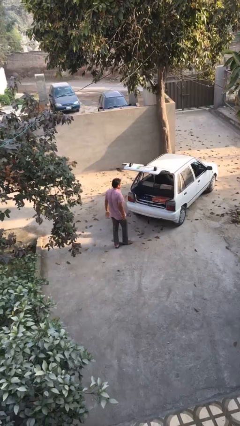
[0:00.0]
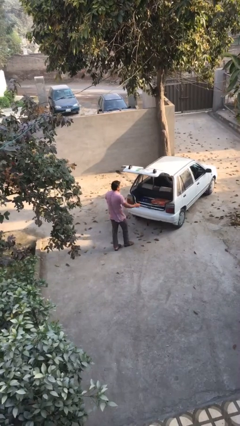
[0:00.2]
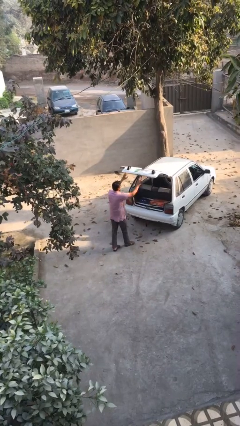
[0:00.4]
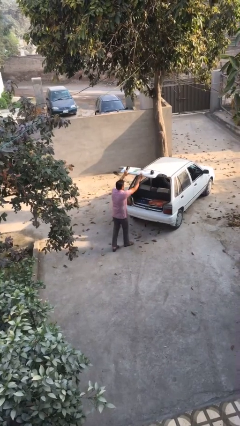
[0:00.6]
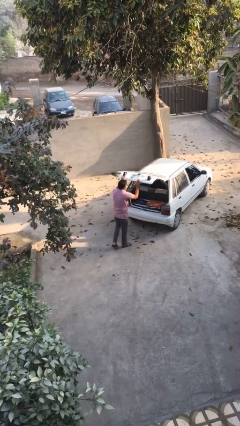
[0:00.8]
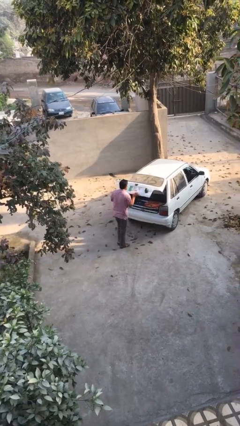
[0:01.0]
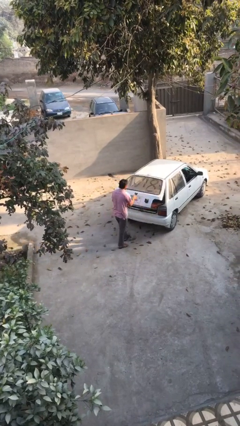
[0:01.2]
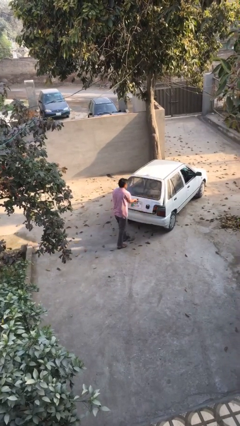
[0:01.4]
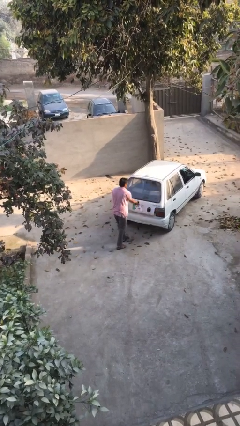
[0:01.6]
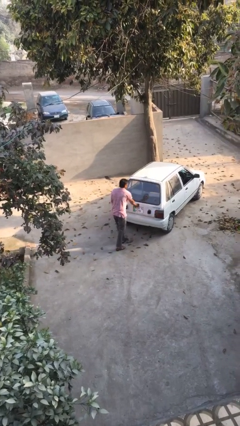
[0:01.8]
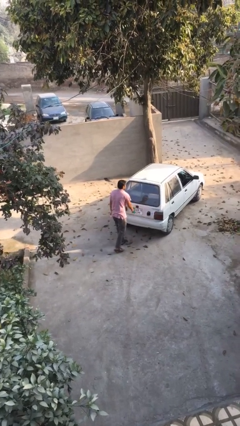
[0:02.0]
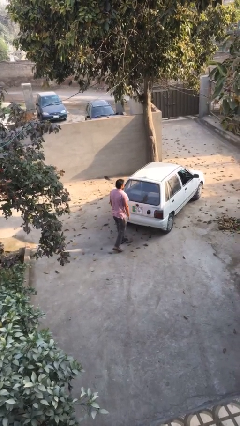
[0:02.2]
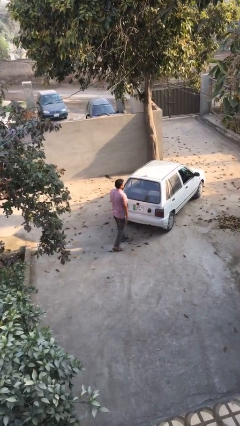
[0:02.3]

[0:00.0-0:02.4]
person closes car trunk

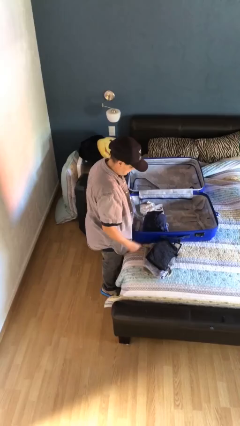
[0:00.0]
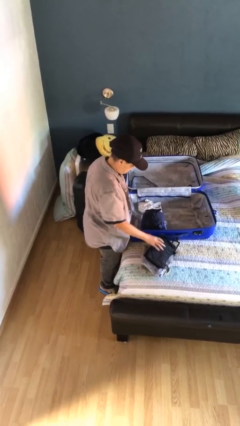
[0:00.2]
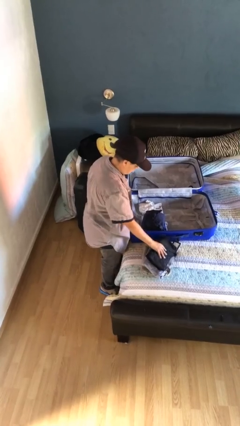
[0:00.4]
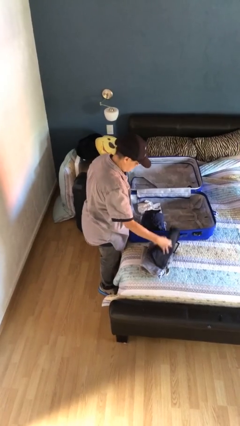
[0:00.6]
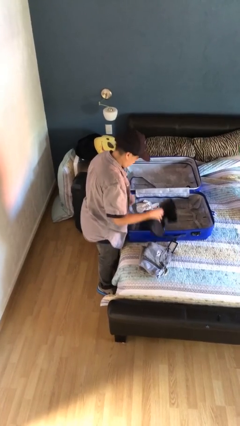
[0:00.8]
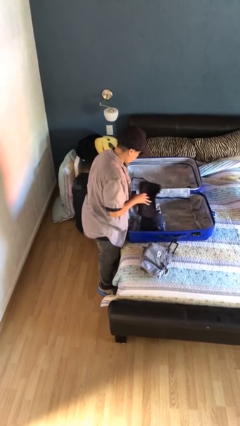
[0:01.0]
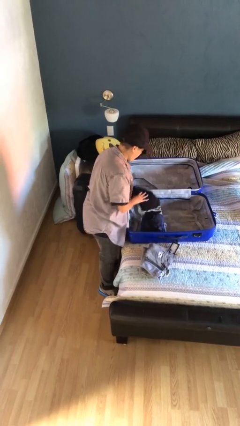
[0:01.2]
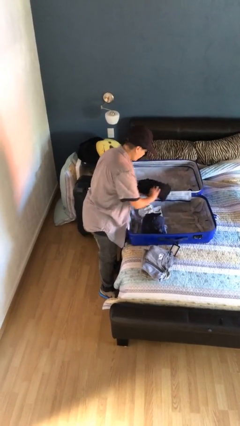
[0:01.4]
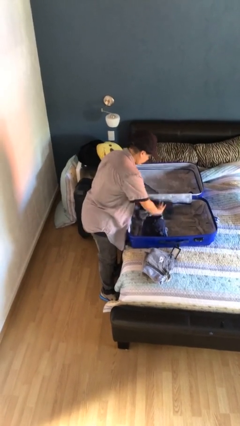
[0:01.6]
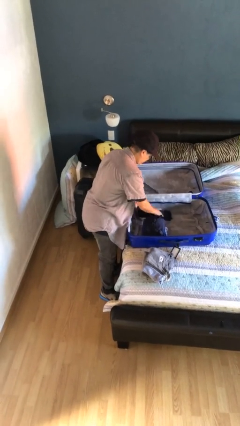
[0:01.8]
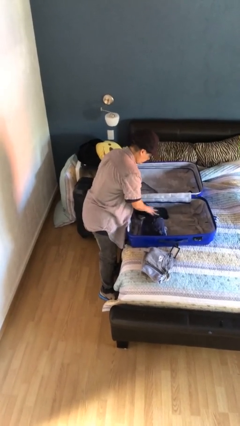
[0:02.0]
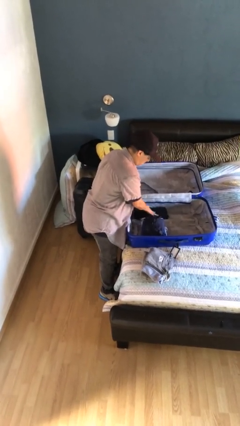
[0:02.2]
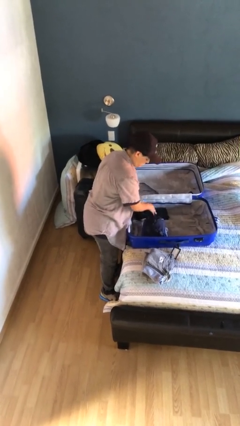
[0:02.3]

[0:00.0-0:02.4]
person loads clothes into suitcase

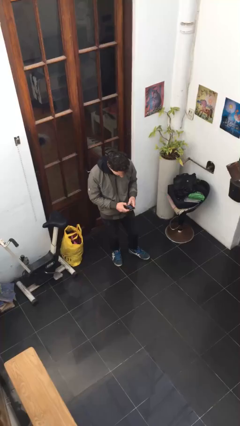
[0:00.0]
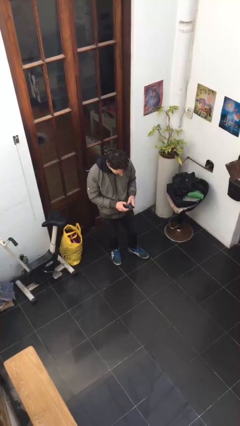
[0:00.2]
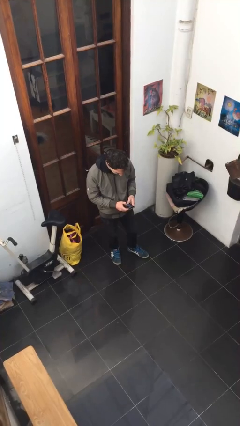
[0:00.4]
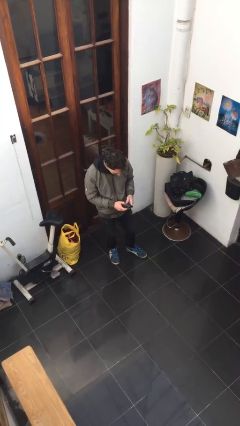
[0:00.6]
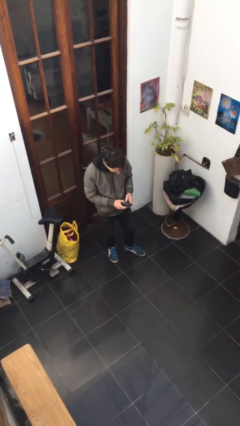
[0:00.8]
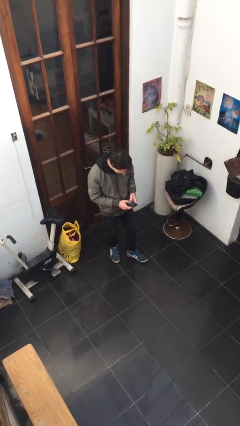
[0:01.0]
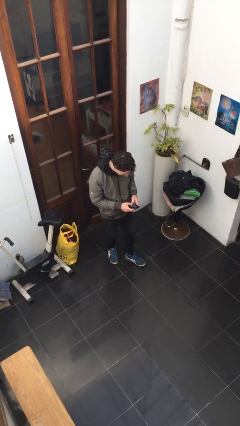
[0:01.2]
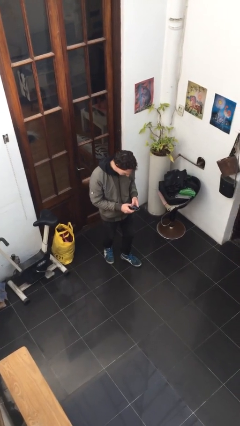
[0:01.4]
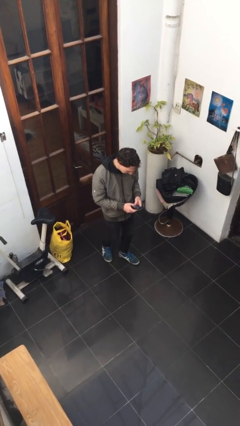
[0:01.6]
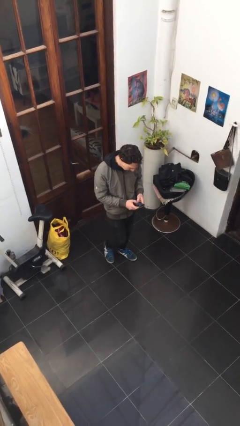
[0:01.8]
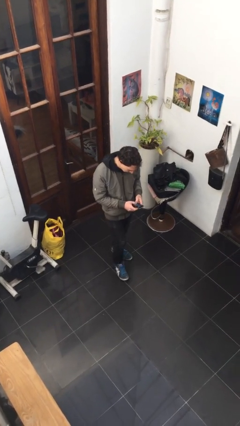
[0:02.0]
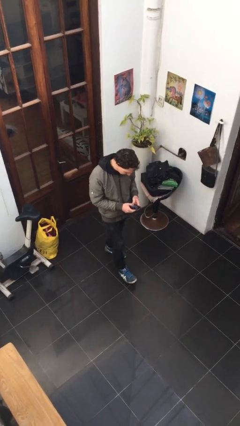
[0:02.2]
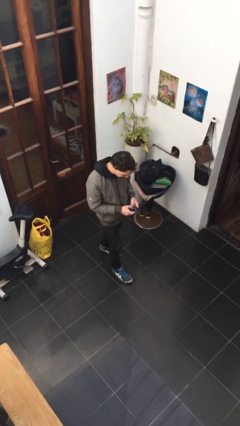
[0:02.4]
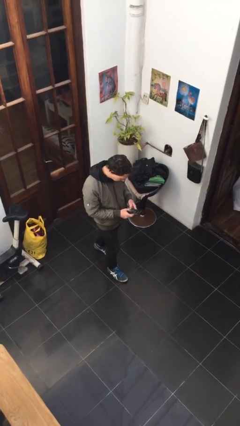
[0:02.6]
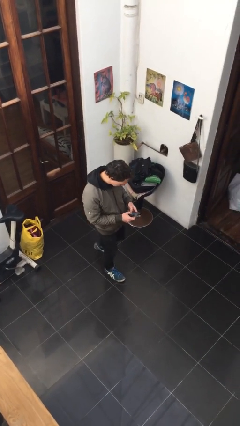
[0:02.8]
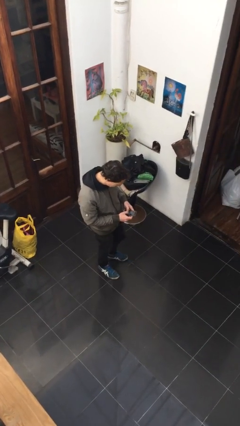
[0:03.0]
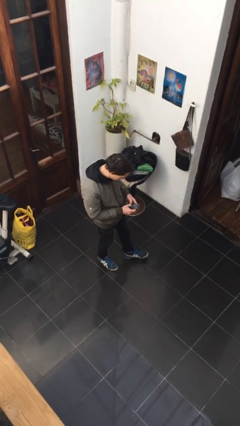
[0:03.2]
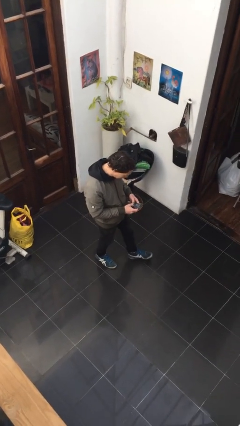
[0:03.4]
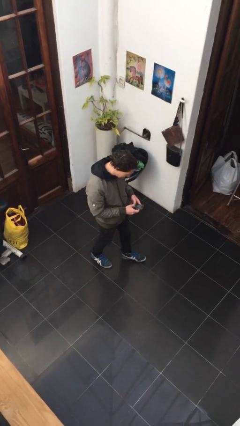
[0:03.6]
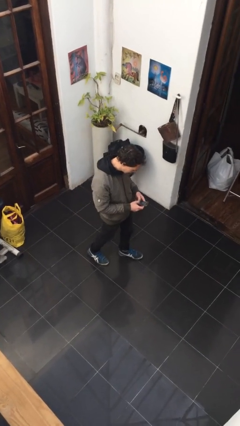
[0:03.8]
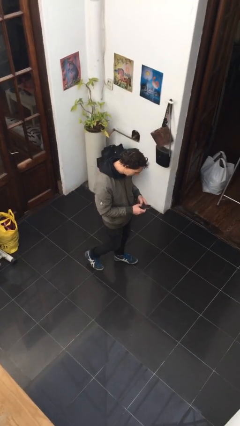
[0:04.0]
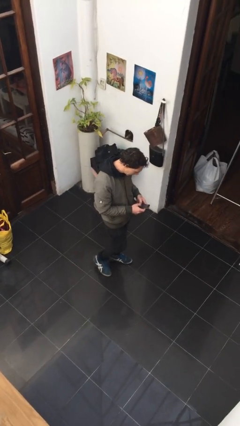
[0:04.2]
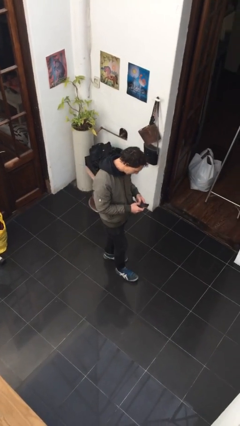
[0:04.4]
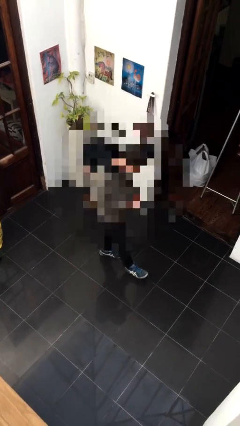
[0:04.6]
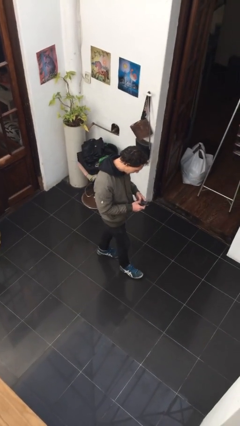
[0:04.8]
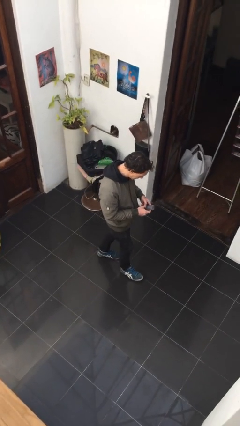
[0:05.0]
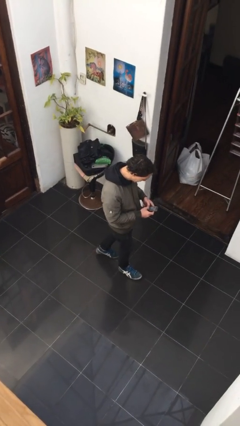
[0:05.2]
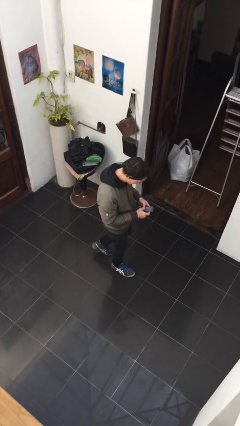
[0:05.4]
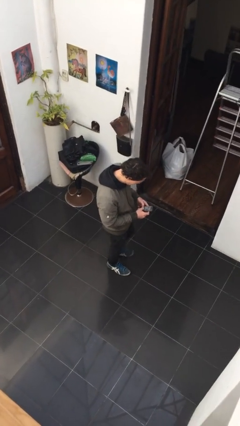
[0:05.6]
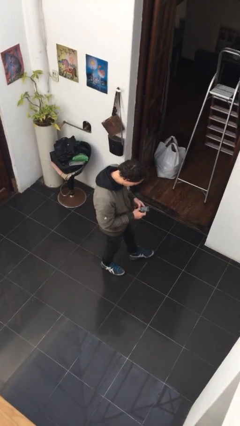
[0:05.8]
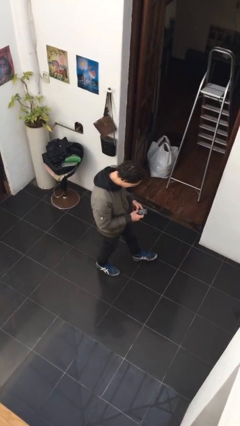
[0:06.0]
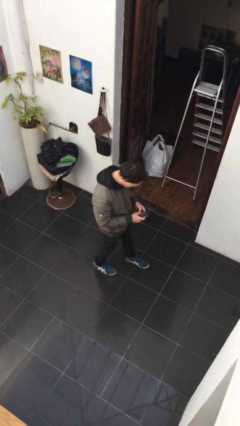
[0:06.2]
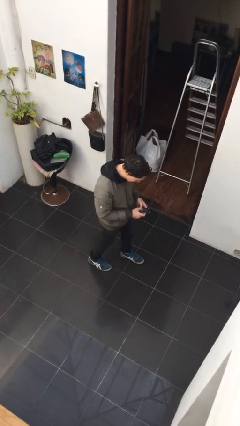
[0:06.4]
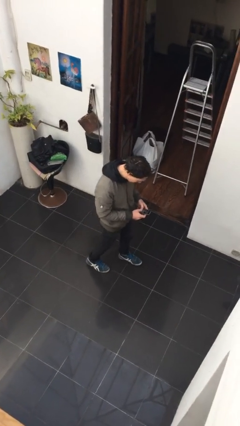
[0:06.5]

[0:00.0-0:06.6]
person texts on phone

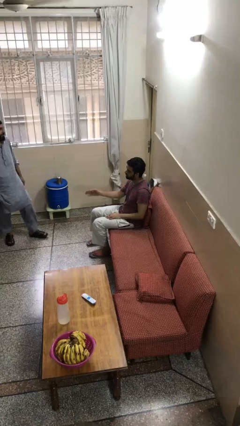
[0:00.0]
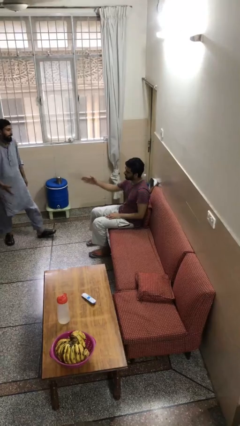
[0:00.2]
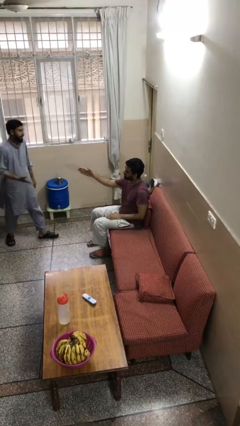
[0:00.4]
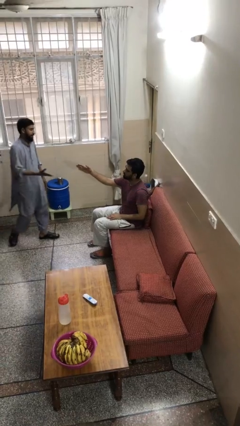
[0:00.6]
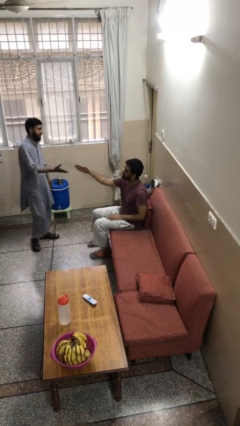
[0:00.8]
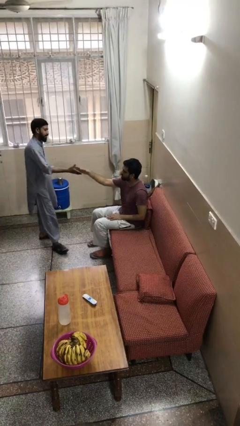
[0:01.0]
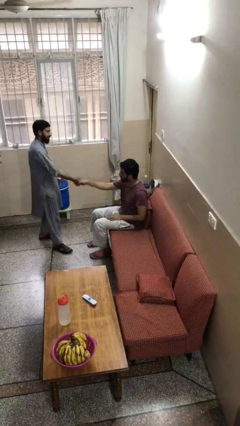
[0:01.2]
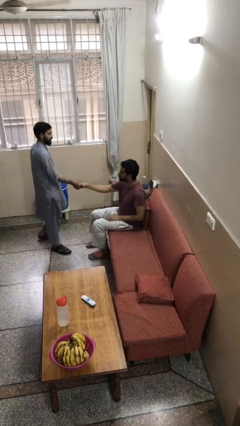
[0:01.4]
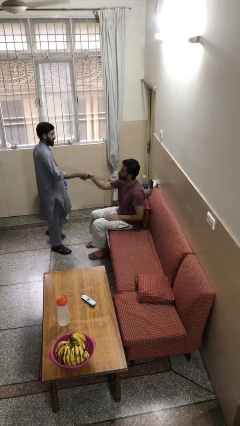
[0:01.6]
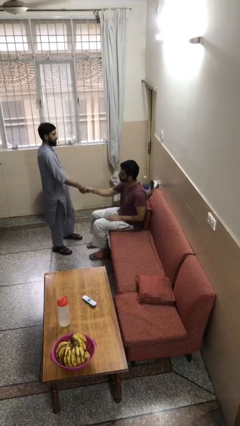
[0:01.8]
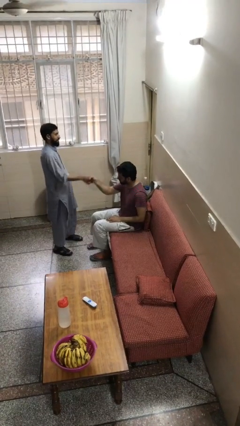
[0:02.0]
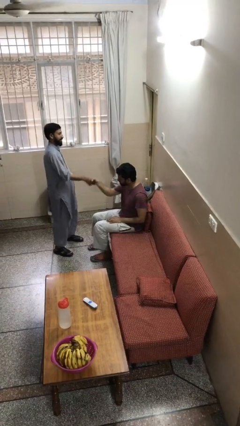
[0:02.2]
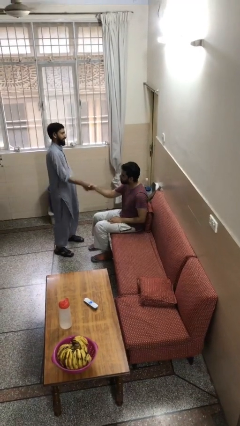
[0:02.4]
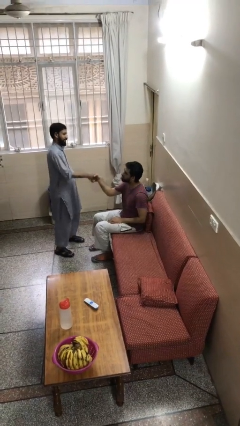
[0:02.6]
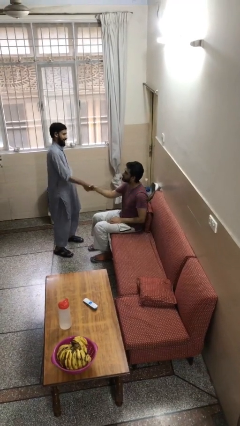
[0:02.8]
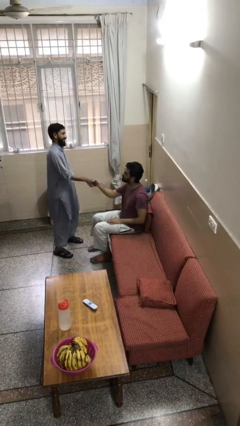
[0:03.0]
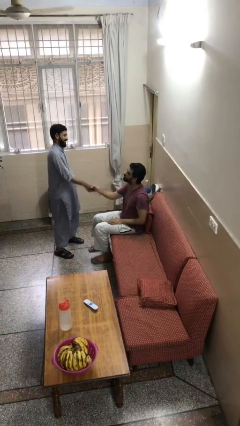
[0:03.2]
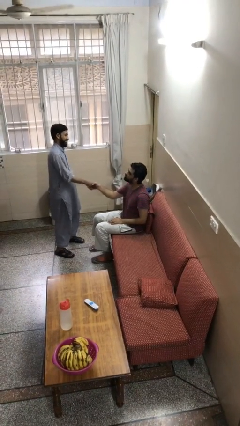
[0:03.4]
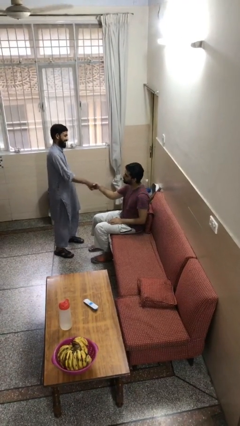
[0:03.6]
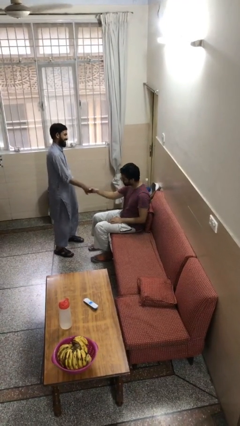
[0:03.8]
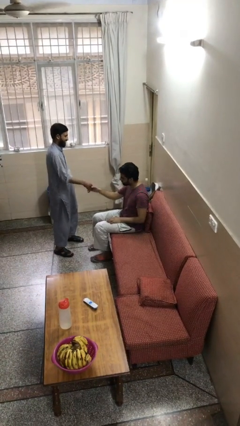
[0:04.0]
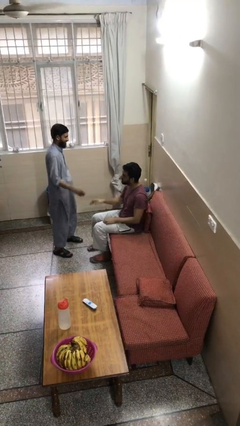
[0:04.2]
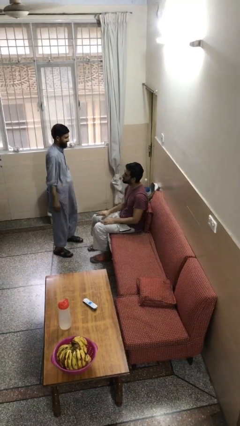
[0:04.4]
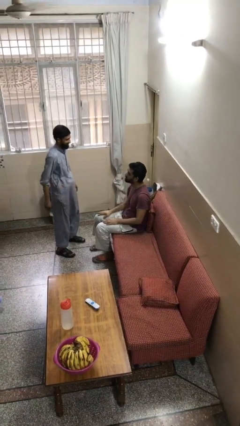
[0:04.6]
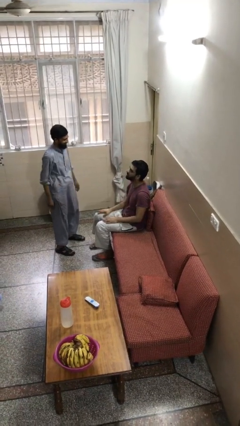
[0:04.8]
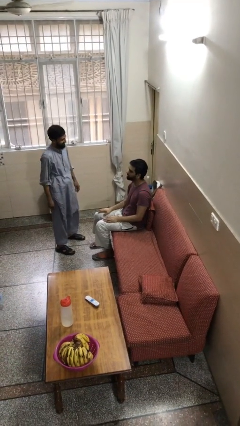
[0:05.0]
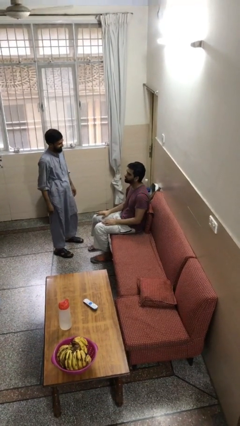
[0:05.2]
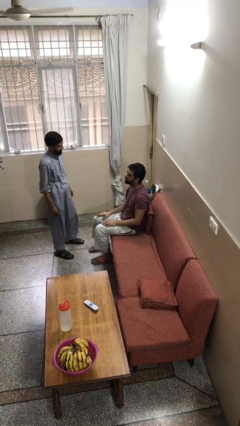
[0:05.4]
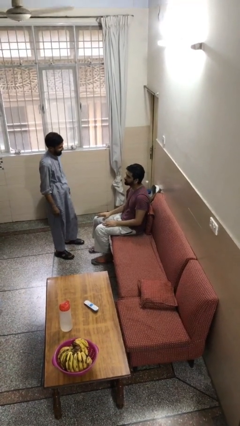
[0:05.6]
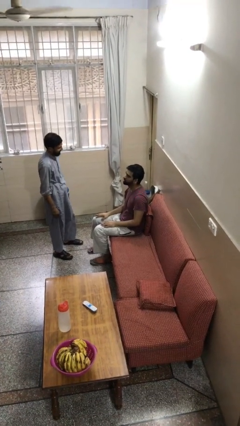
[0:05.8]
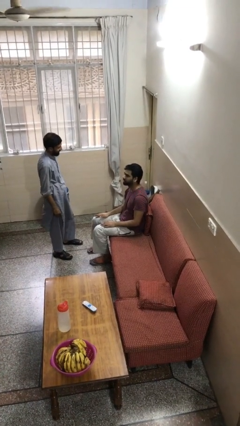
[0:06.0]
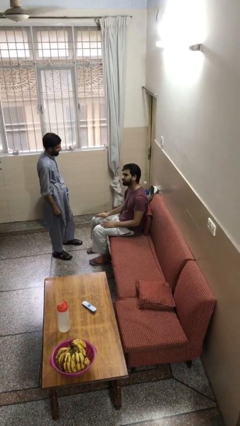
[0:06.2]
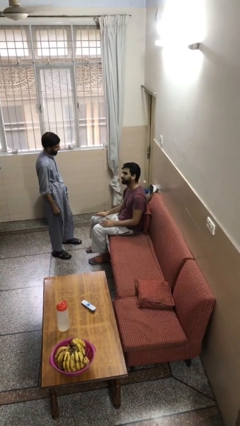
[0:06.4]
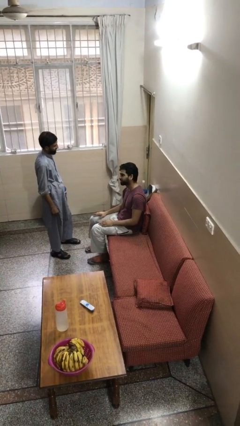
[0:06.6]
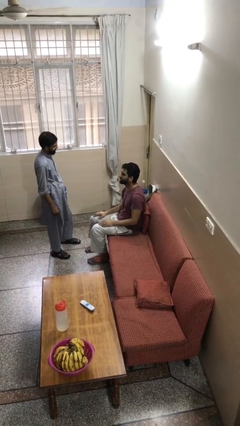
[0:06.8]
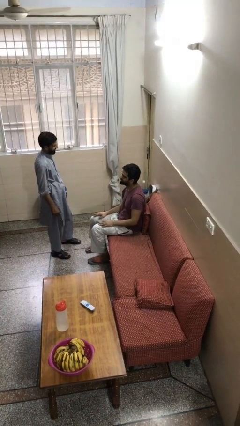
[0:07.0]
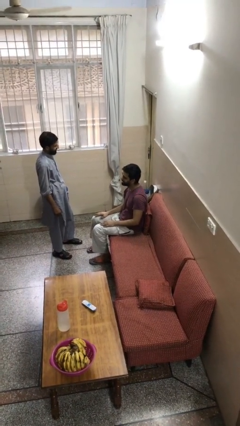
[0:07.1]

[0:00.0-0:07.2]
person shakes hand
